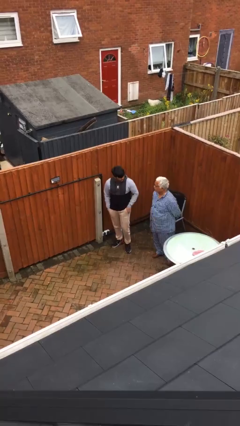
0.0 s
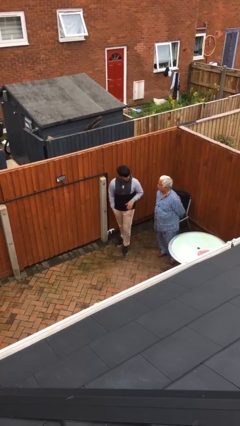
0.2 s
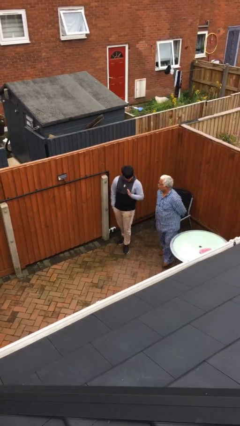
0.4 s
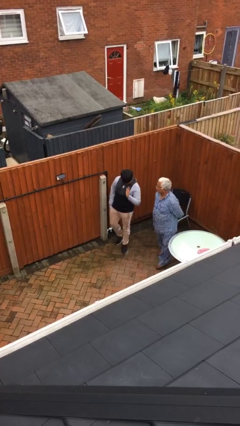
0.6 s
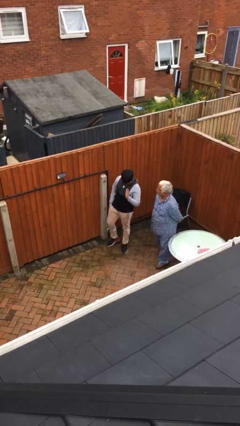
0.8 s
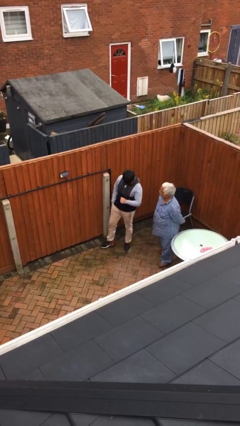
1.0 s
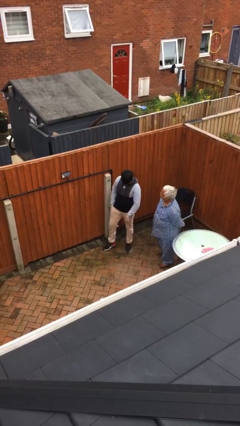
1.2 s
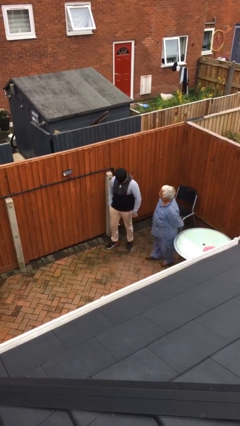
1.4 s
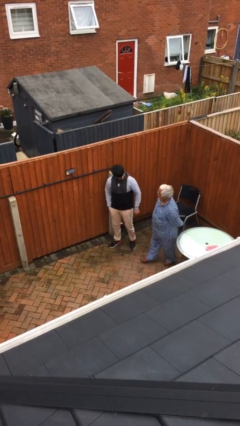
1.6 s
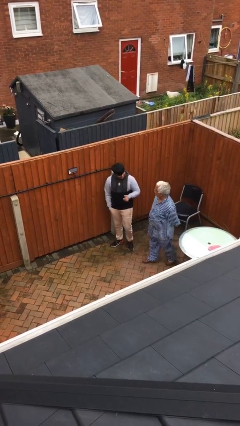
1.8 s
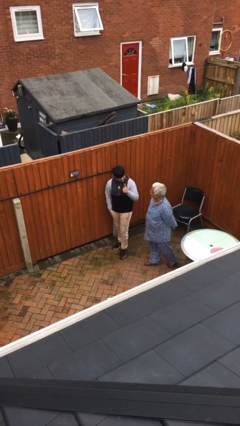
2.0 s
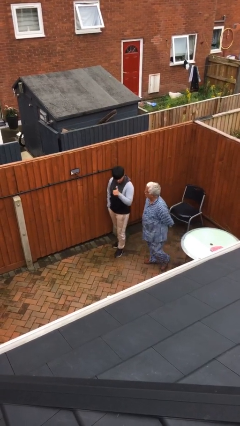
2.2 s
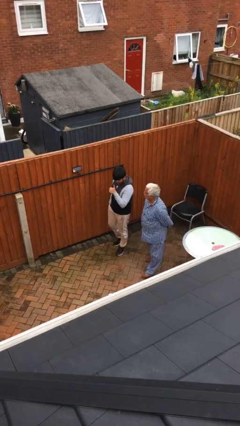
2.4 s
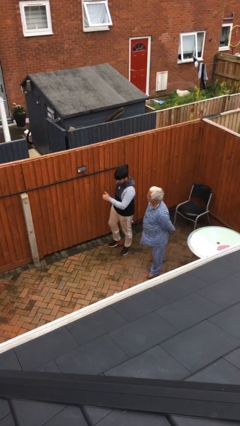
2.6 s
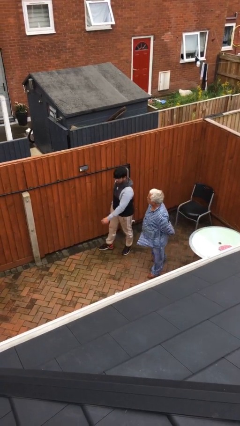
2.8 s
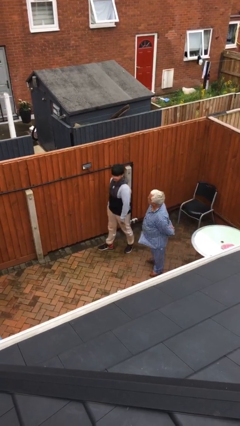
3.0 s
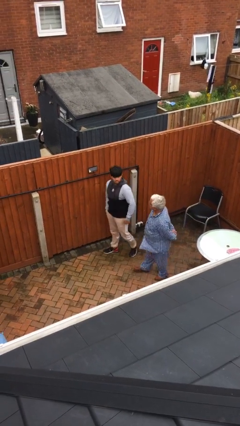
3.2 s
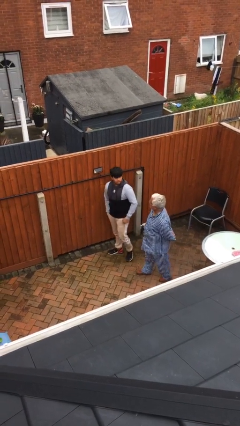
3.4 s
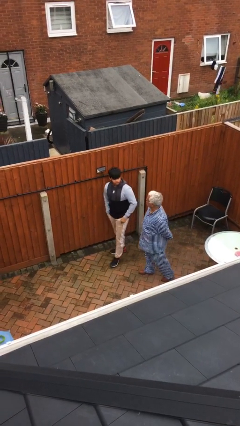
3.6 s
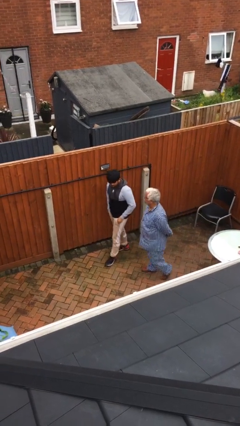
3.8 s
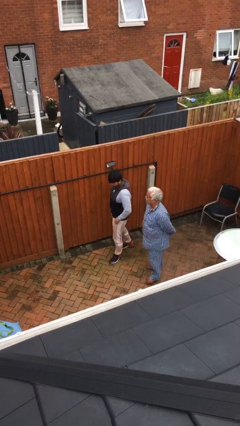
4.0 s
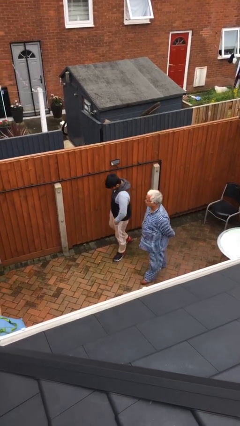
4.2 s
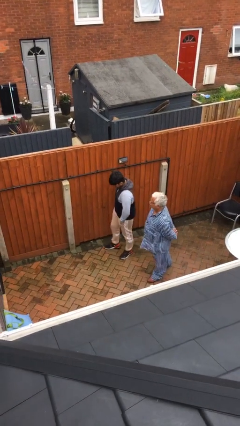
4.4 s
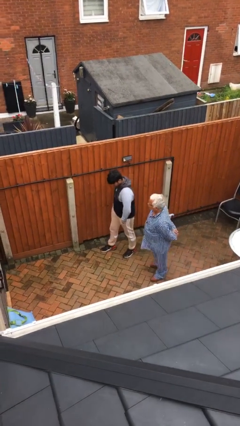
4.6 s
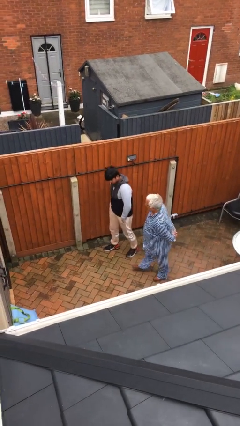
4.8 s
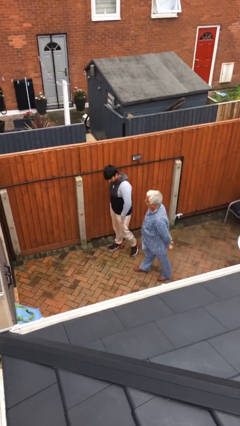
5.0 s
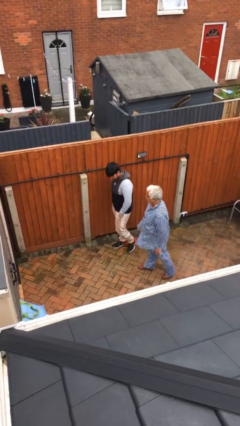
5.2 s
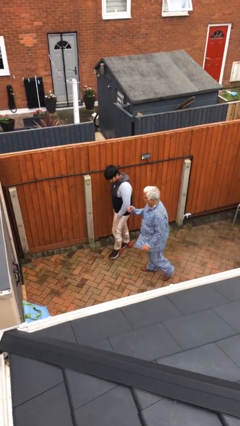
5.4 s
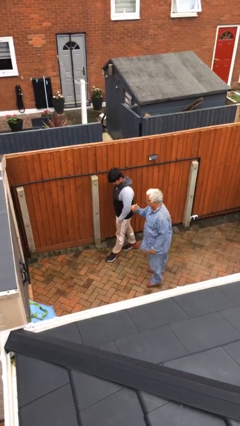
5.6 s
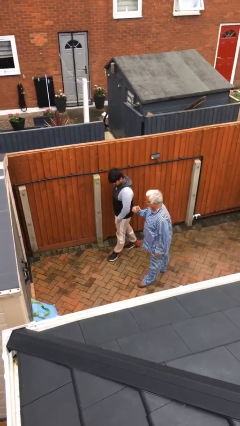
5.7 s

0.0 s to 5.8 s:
person talks to person

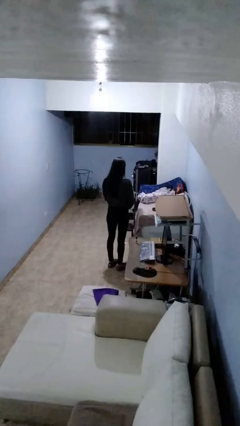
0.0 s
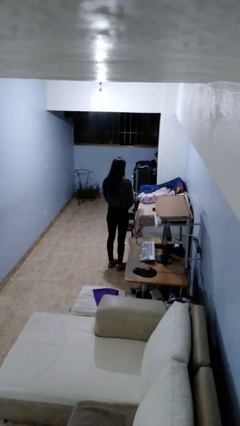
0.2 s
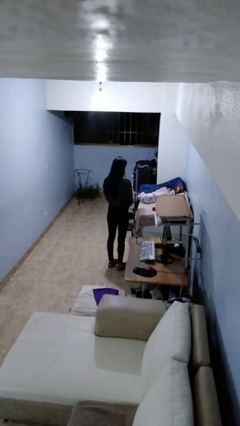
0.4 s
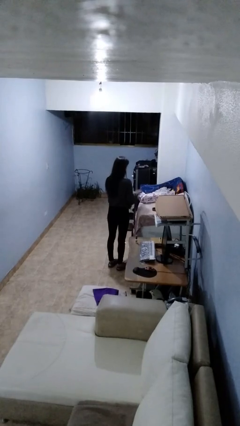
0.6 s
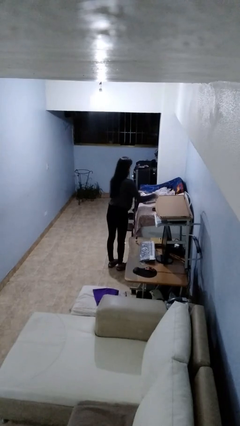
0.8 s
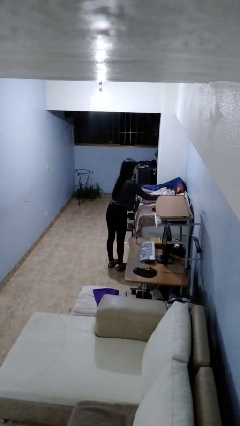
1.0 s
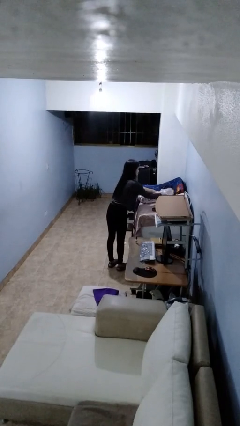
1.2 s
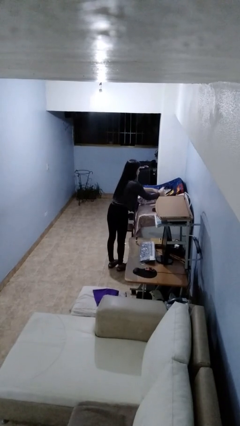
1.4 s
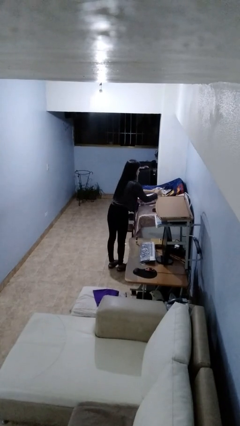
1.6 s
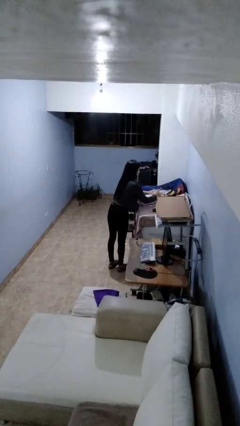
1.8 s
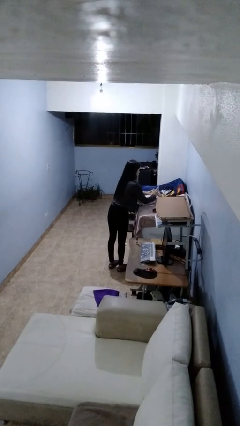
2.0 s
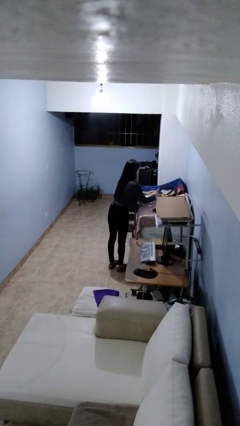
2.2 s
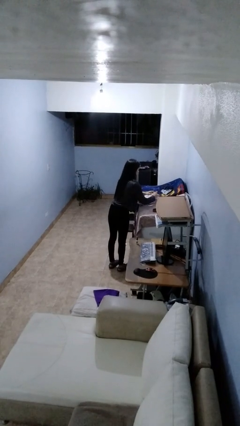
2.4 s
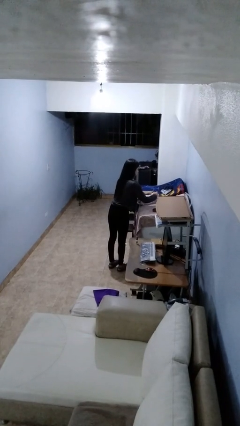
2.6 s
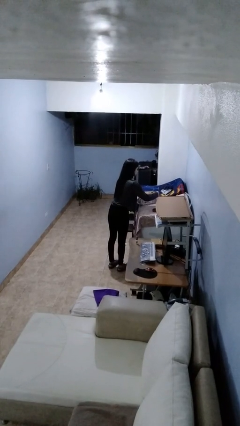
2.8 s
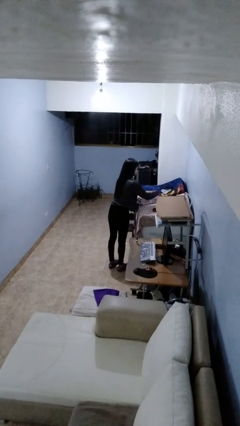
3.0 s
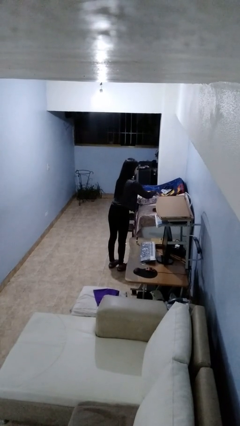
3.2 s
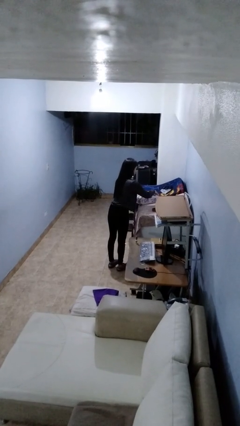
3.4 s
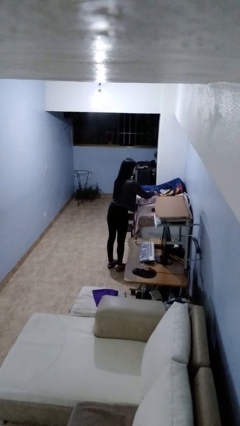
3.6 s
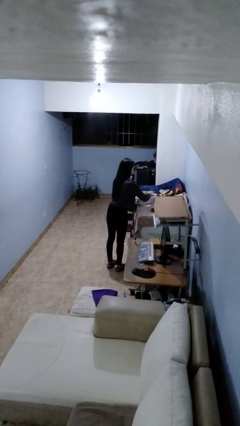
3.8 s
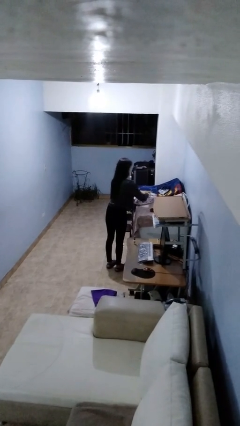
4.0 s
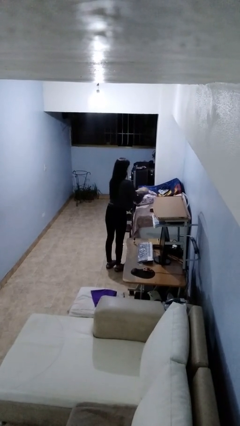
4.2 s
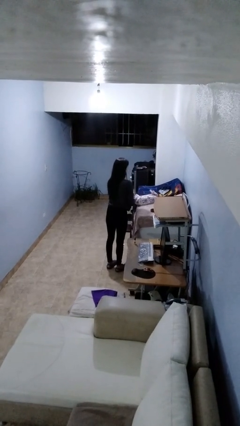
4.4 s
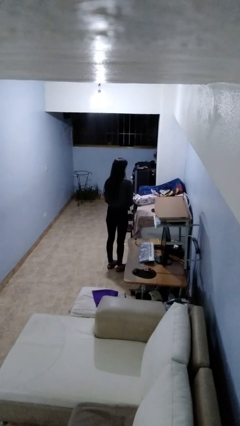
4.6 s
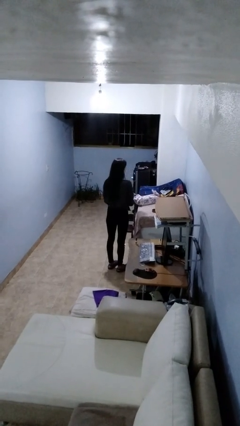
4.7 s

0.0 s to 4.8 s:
person wraps box

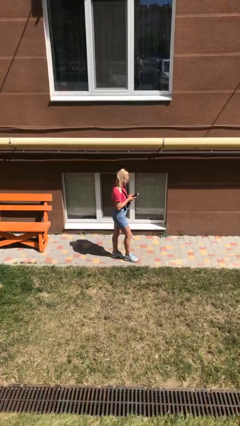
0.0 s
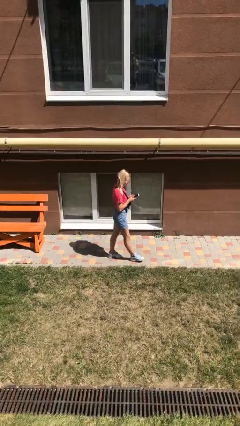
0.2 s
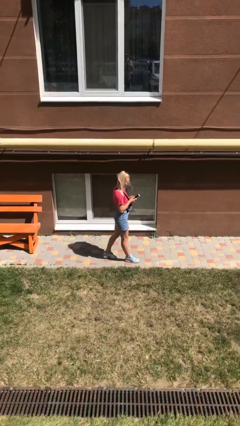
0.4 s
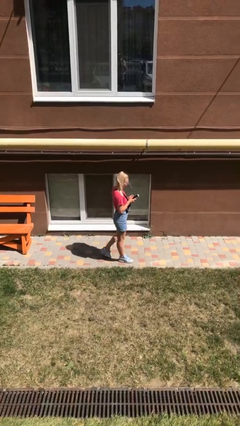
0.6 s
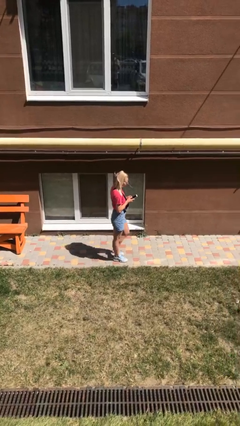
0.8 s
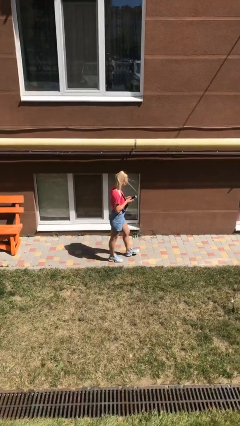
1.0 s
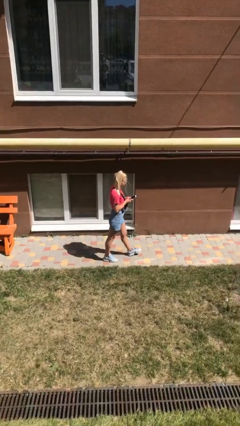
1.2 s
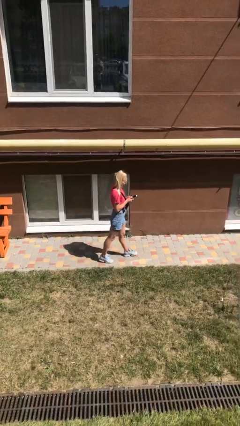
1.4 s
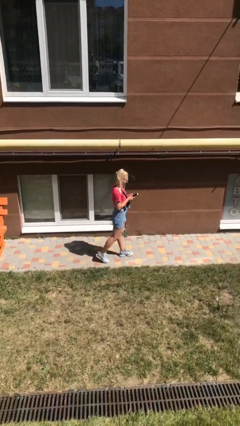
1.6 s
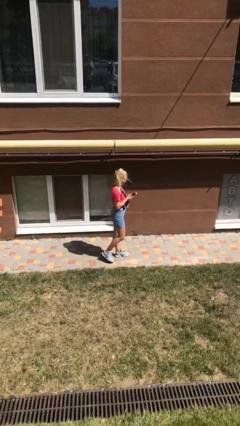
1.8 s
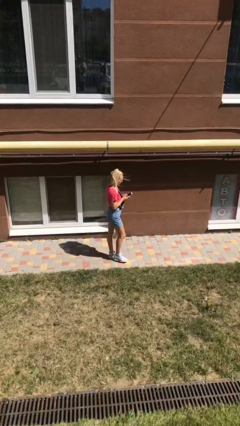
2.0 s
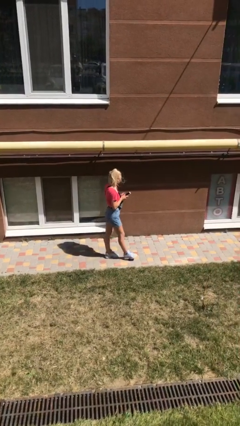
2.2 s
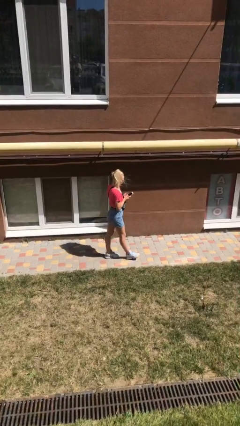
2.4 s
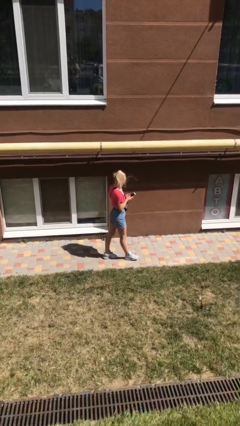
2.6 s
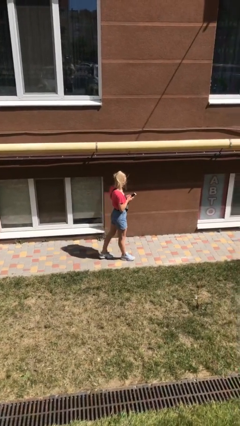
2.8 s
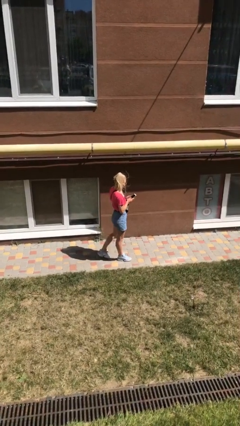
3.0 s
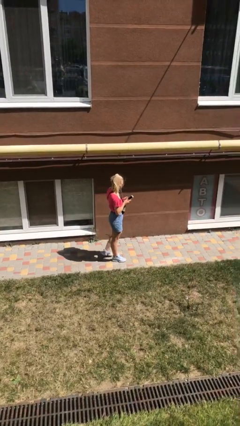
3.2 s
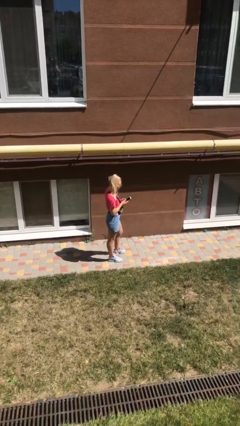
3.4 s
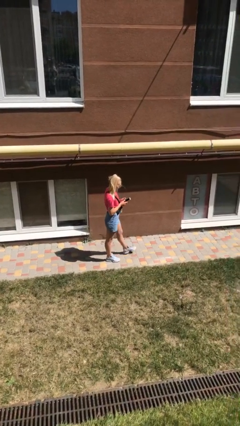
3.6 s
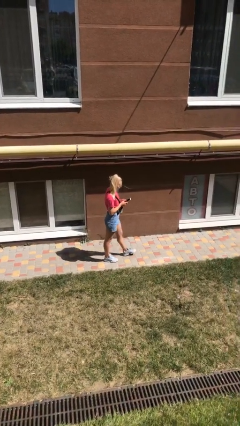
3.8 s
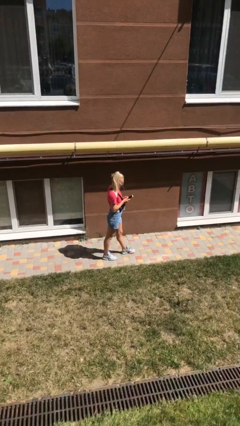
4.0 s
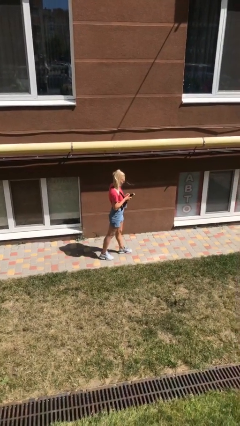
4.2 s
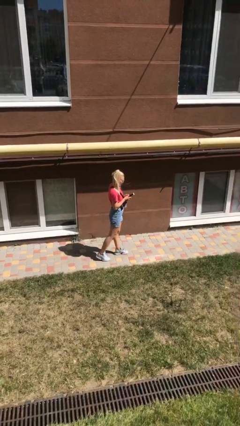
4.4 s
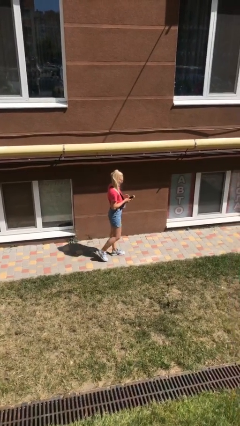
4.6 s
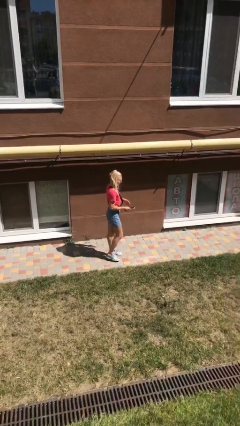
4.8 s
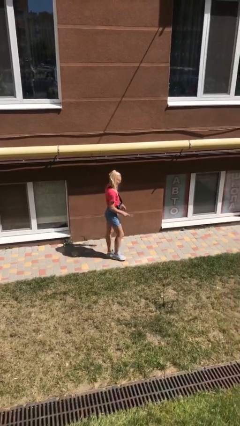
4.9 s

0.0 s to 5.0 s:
person texts on phone

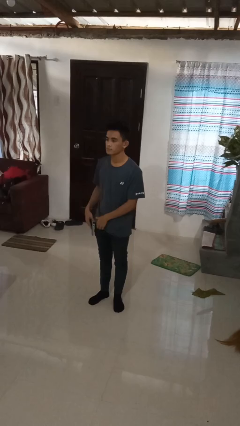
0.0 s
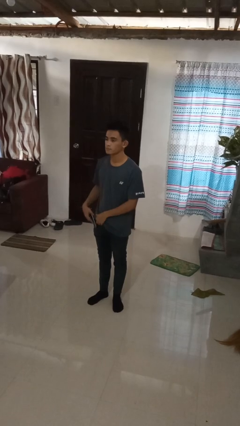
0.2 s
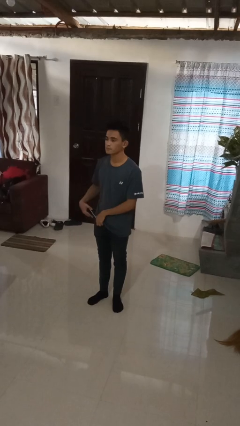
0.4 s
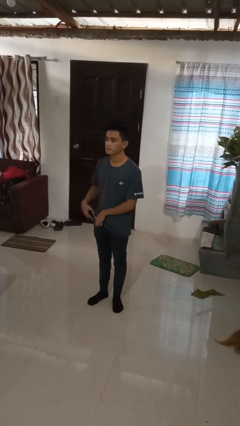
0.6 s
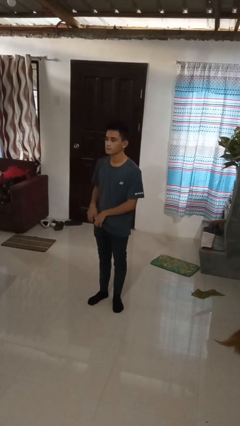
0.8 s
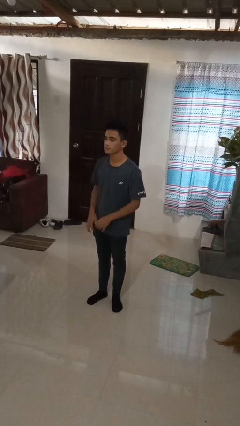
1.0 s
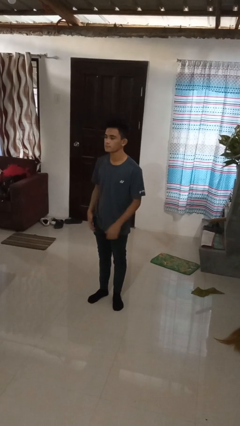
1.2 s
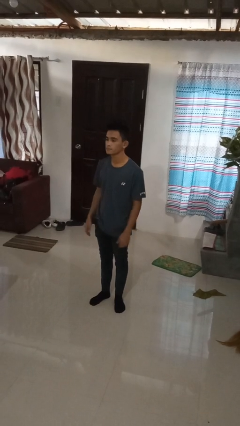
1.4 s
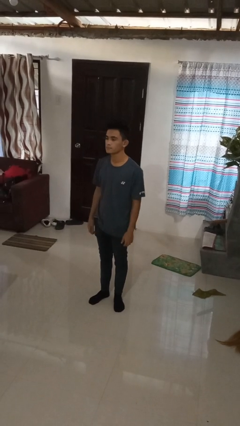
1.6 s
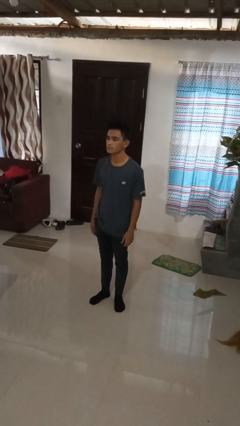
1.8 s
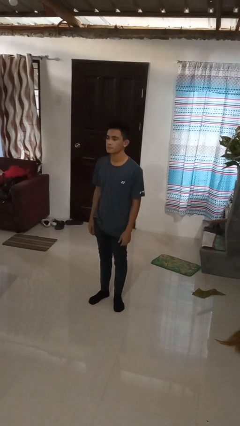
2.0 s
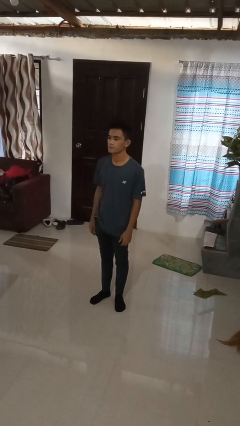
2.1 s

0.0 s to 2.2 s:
person puts phone into pocket
